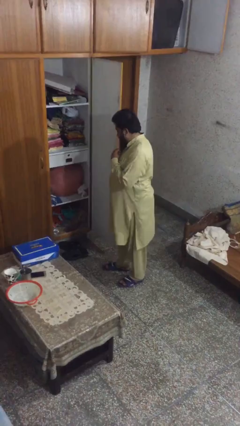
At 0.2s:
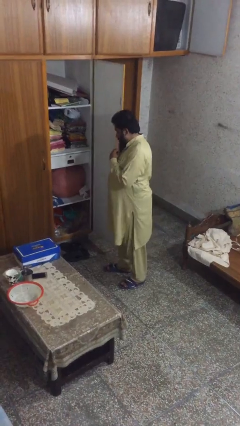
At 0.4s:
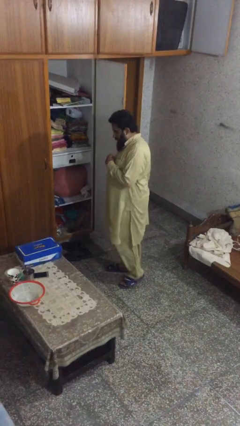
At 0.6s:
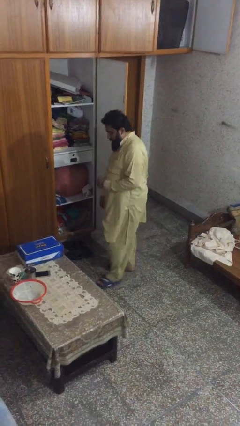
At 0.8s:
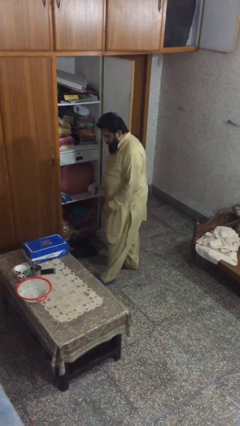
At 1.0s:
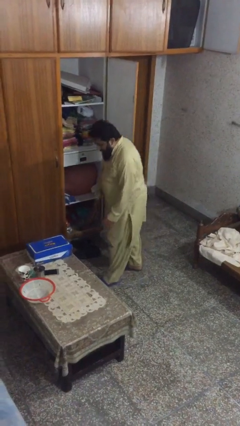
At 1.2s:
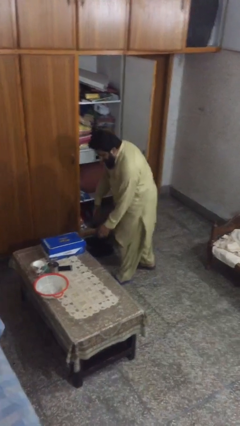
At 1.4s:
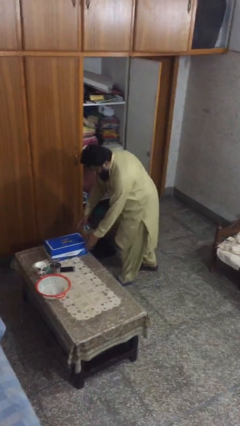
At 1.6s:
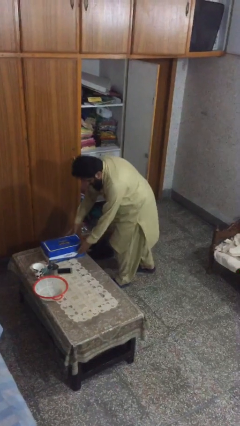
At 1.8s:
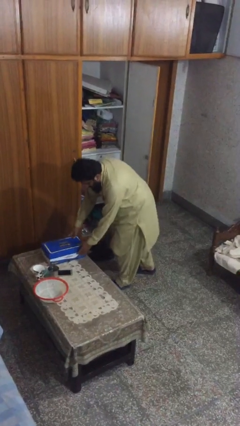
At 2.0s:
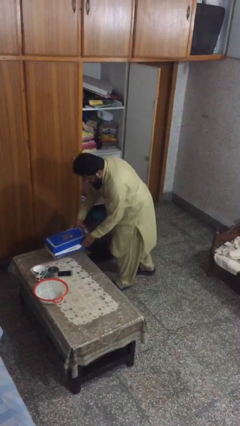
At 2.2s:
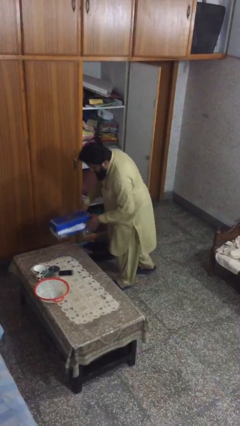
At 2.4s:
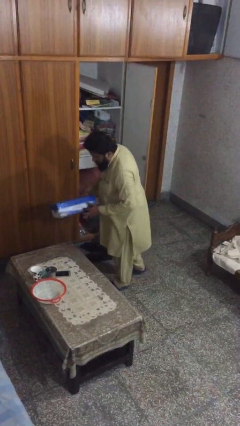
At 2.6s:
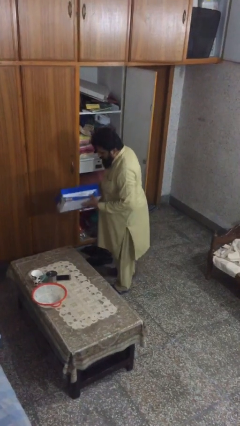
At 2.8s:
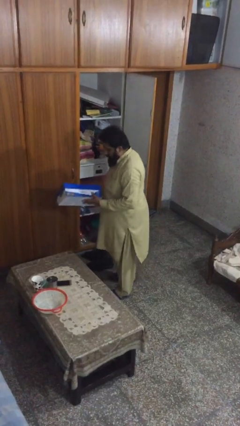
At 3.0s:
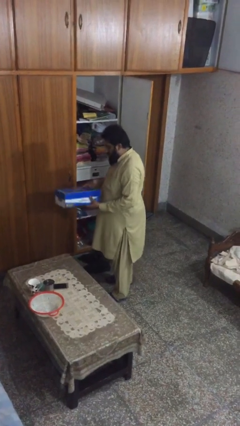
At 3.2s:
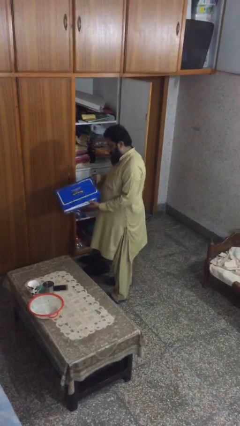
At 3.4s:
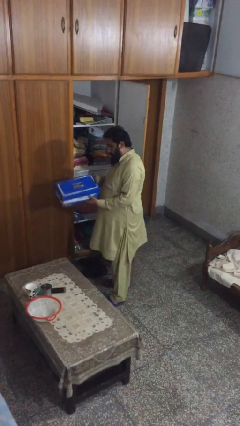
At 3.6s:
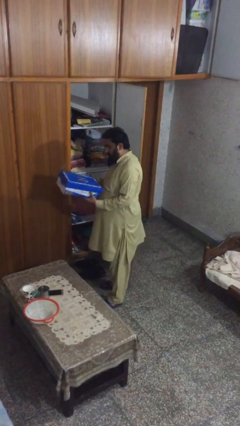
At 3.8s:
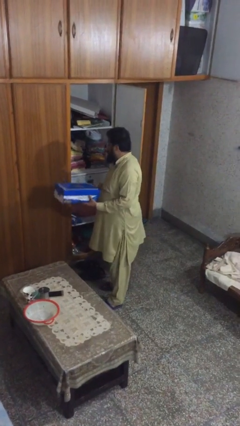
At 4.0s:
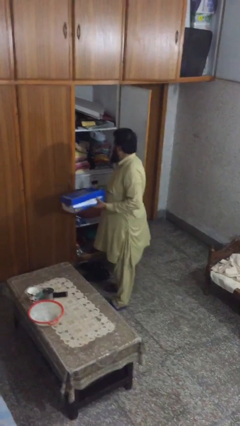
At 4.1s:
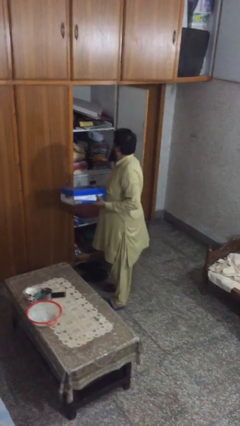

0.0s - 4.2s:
person picks up object from table

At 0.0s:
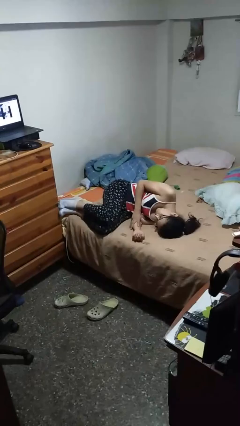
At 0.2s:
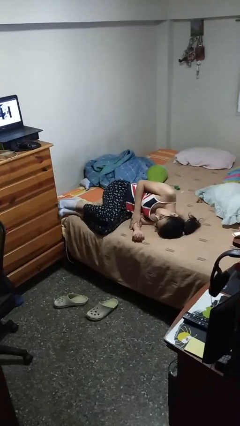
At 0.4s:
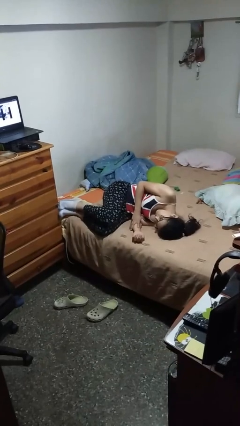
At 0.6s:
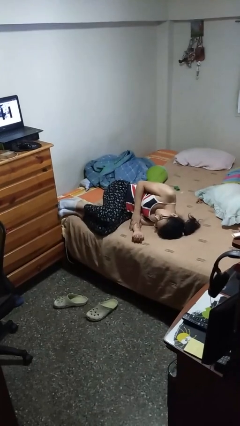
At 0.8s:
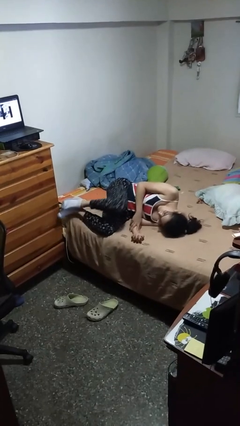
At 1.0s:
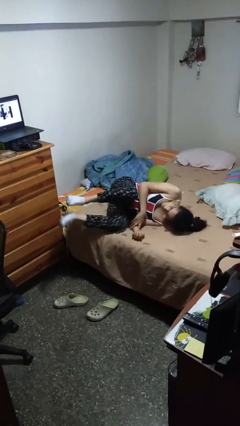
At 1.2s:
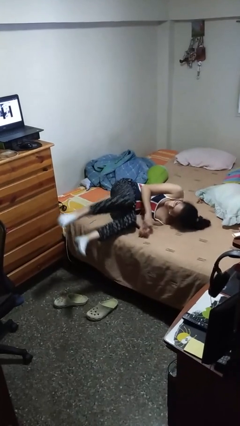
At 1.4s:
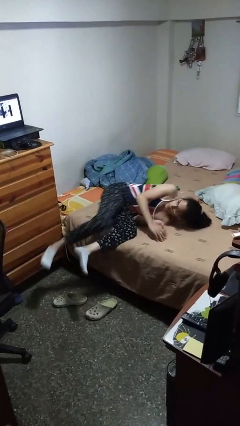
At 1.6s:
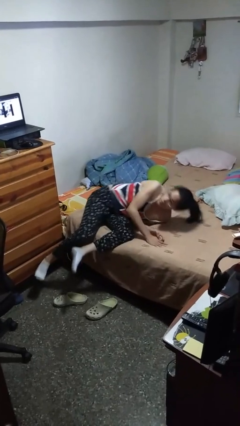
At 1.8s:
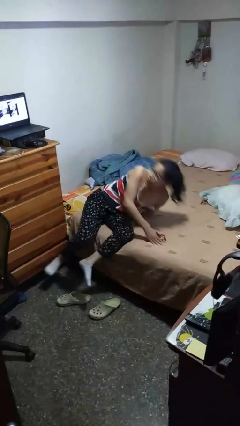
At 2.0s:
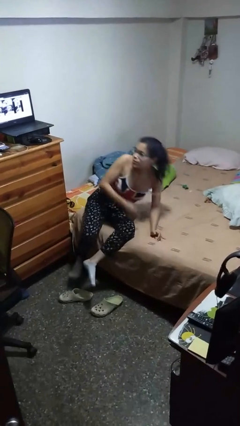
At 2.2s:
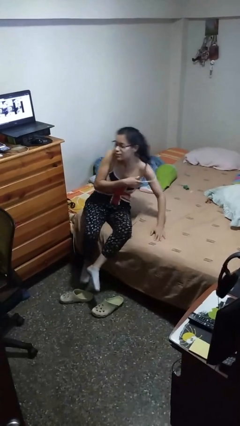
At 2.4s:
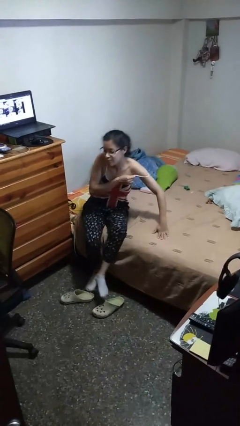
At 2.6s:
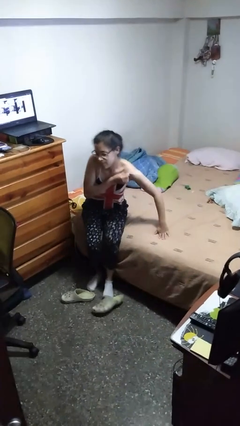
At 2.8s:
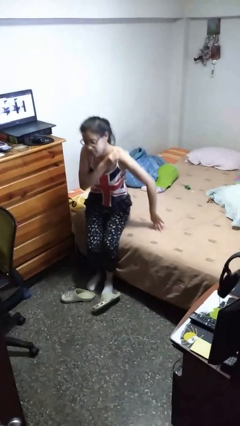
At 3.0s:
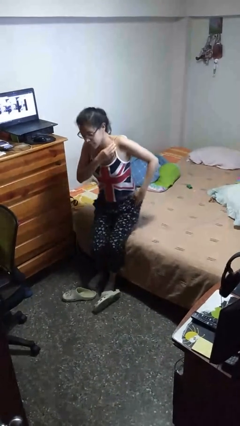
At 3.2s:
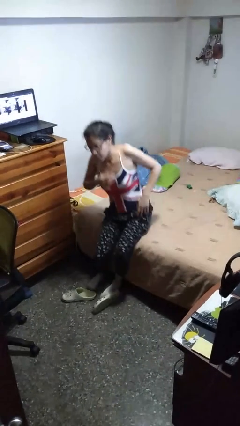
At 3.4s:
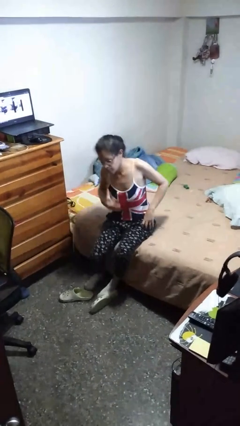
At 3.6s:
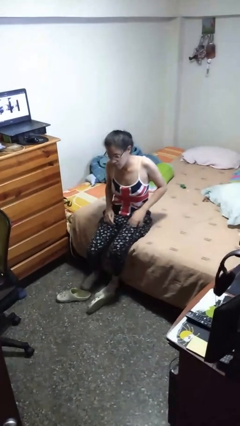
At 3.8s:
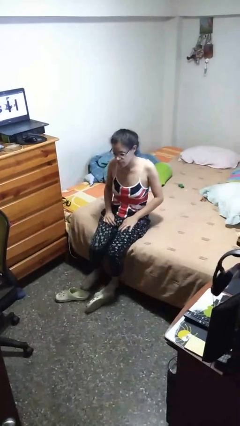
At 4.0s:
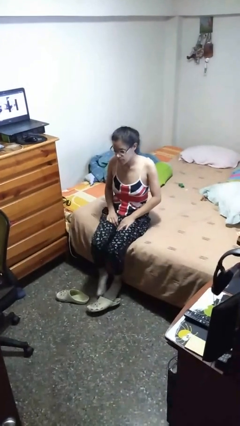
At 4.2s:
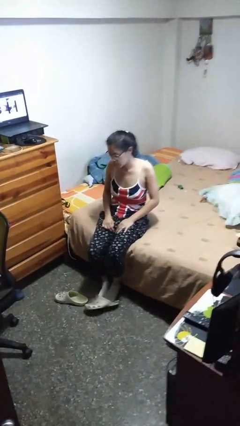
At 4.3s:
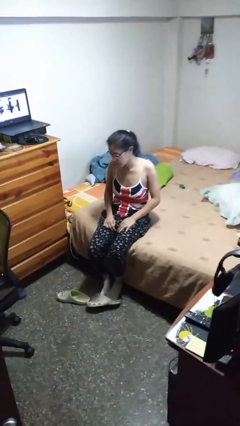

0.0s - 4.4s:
person stands up

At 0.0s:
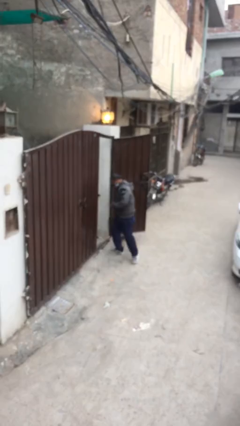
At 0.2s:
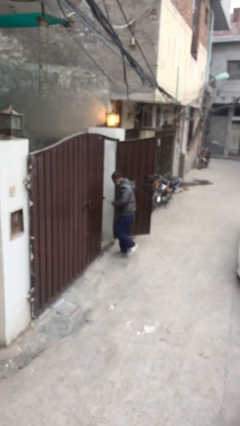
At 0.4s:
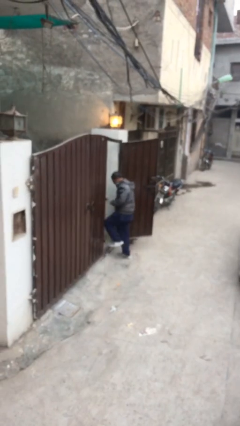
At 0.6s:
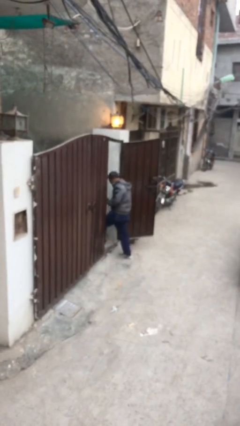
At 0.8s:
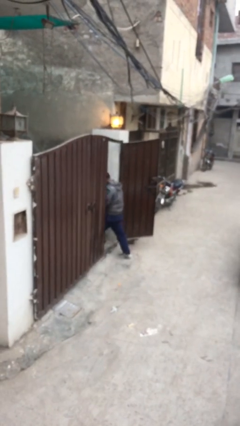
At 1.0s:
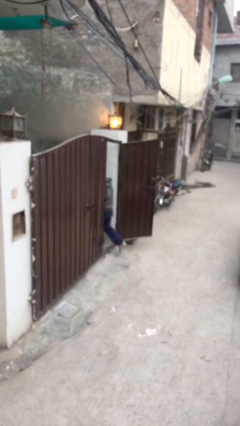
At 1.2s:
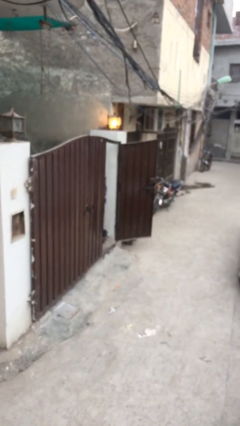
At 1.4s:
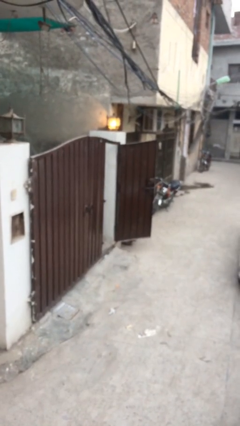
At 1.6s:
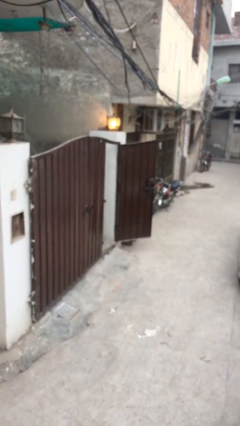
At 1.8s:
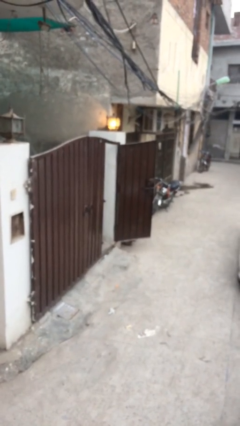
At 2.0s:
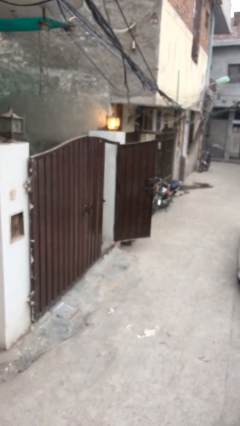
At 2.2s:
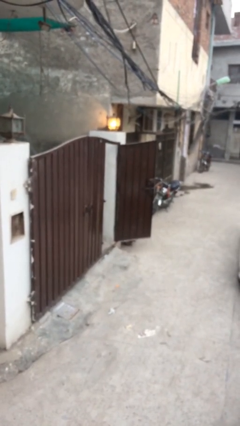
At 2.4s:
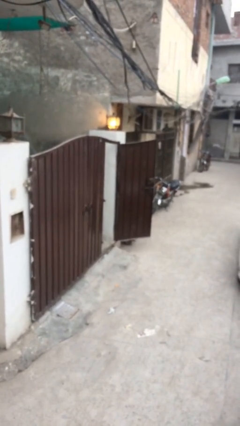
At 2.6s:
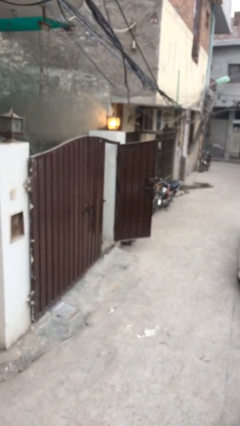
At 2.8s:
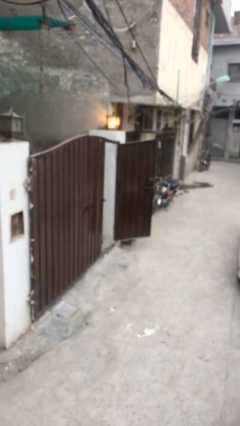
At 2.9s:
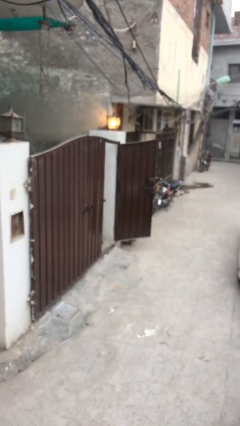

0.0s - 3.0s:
person exits scene through structure

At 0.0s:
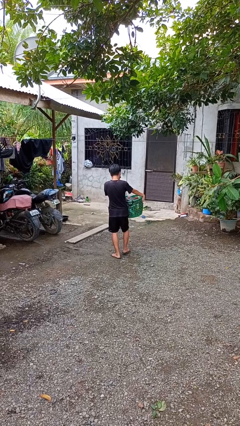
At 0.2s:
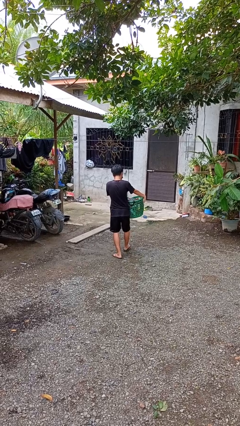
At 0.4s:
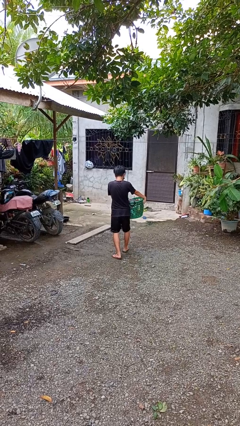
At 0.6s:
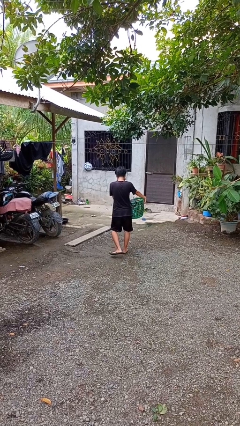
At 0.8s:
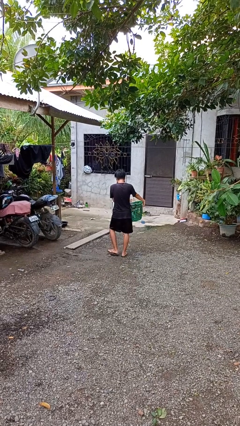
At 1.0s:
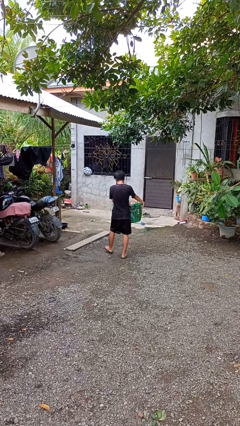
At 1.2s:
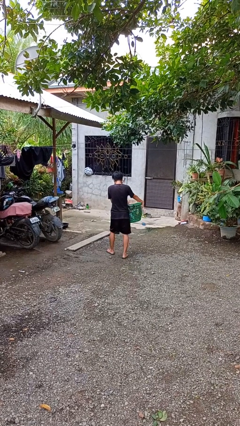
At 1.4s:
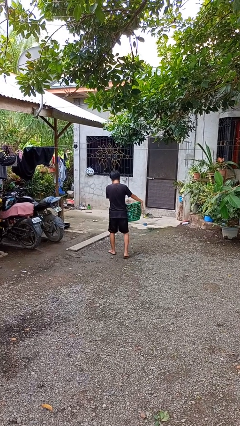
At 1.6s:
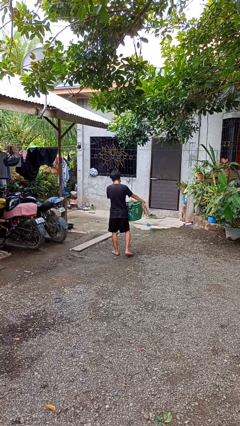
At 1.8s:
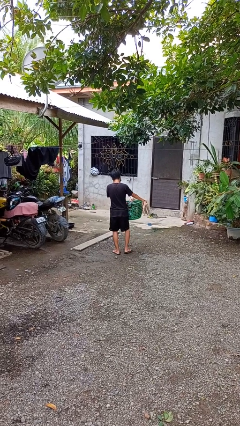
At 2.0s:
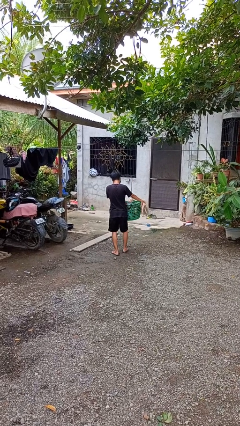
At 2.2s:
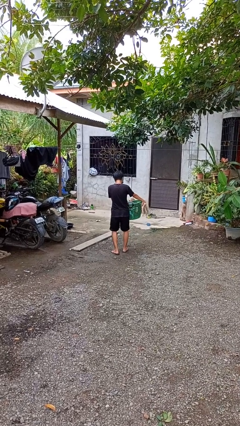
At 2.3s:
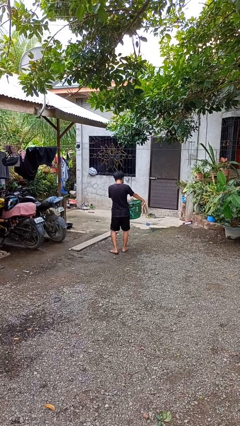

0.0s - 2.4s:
person carries laundry basket

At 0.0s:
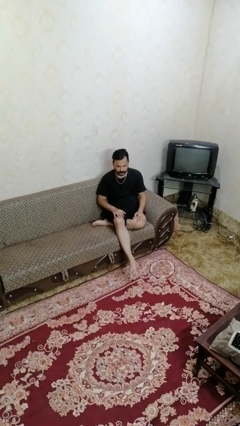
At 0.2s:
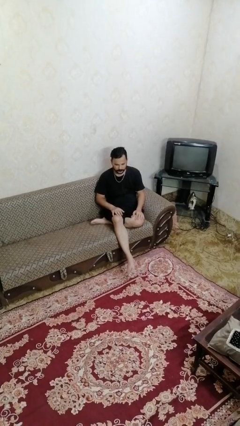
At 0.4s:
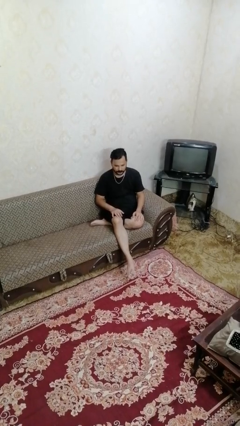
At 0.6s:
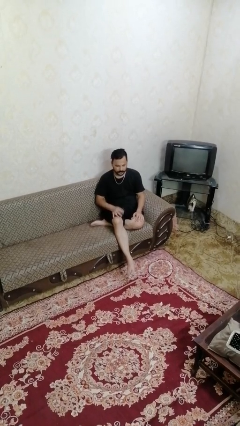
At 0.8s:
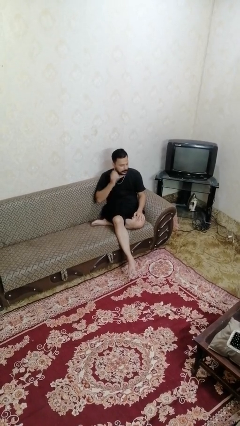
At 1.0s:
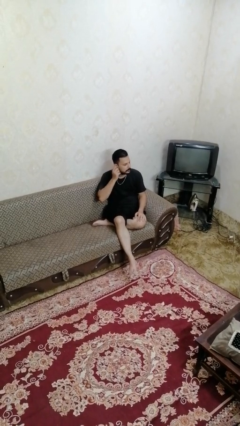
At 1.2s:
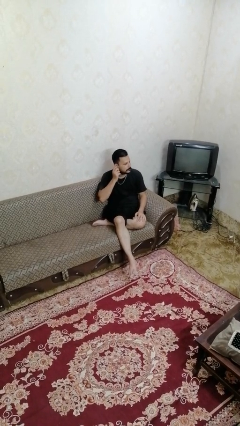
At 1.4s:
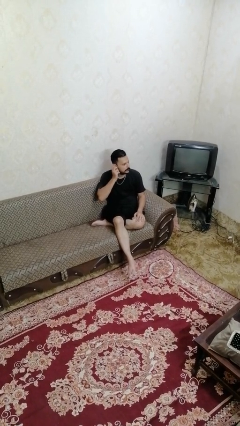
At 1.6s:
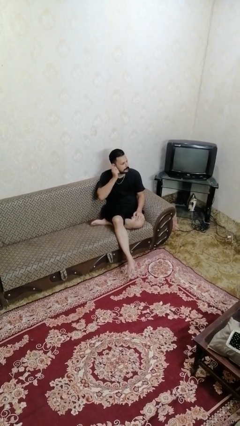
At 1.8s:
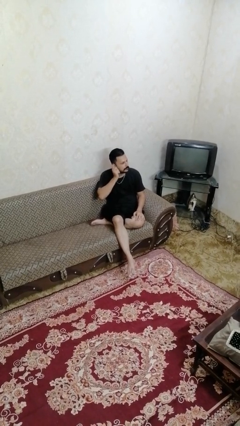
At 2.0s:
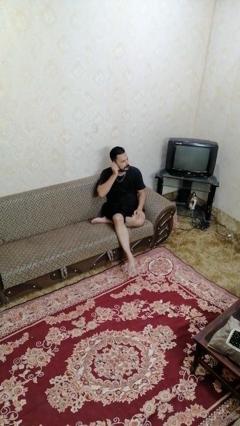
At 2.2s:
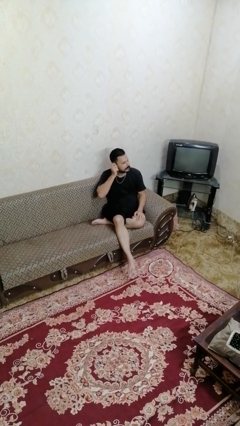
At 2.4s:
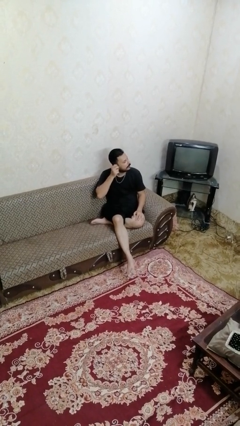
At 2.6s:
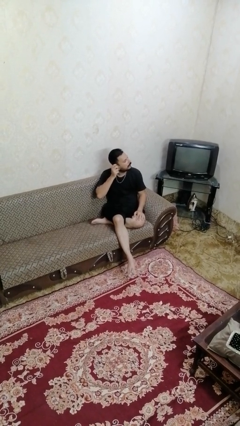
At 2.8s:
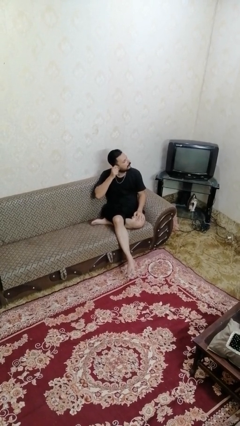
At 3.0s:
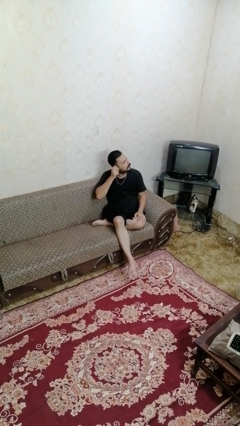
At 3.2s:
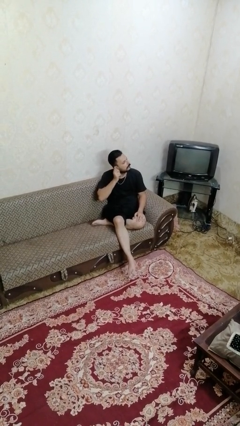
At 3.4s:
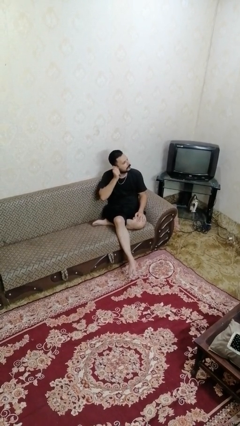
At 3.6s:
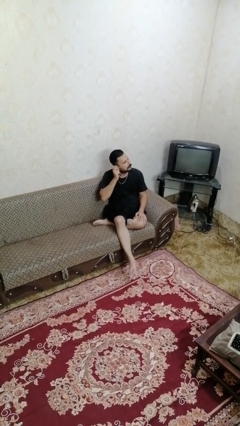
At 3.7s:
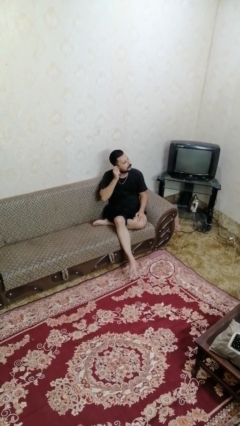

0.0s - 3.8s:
person touches earlobe
